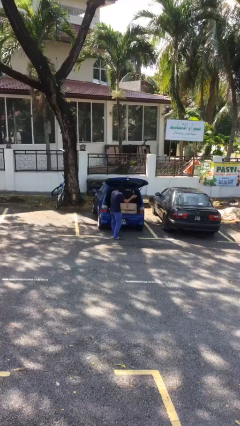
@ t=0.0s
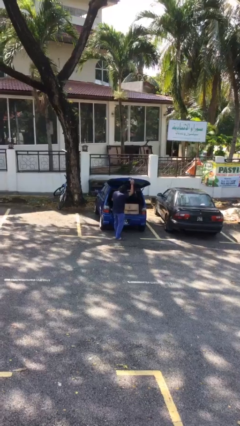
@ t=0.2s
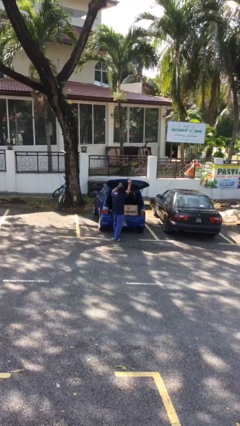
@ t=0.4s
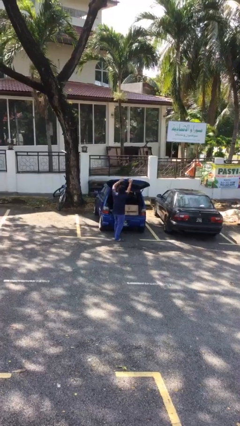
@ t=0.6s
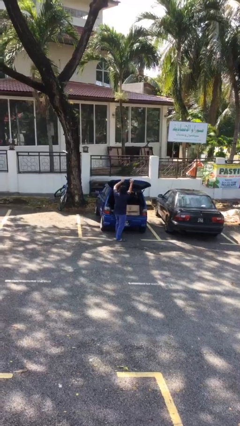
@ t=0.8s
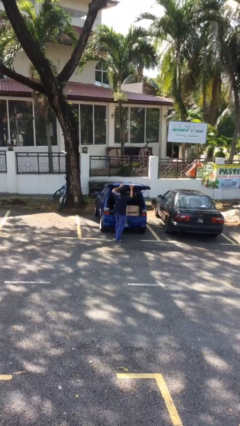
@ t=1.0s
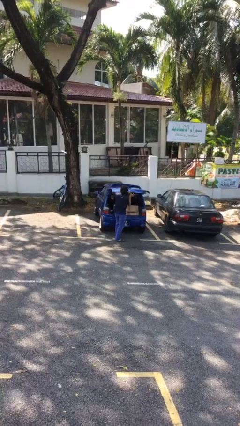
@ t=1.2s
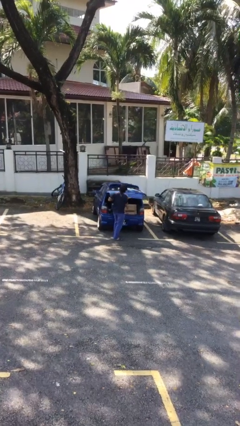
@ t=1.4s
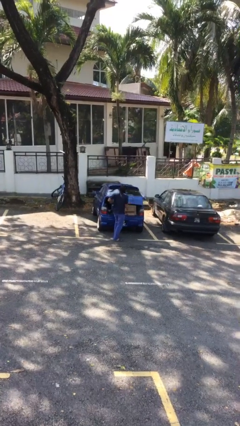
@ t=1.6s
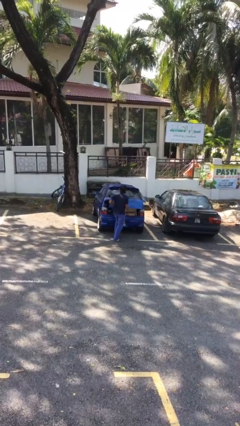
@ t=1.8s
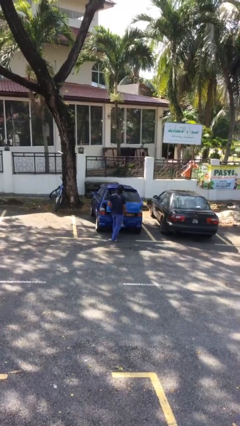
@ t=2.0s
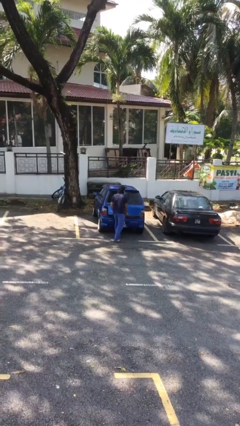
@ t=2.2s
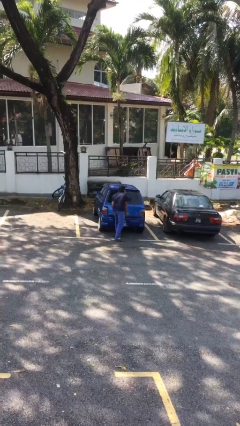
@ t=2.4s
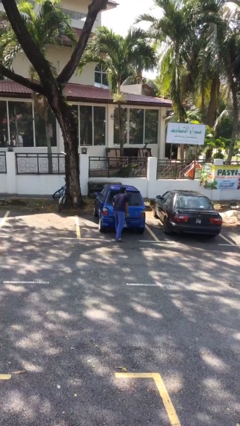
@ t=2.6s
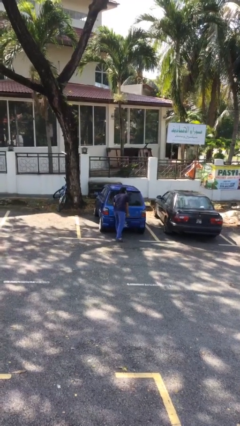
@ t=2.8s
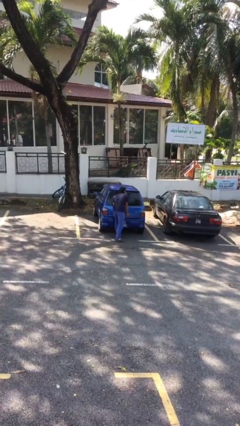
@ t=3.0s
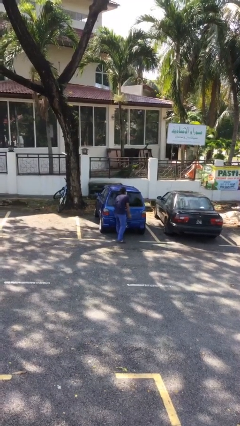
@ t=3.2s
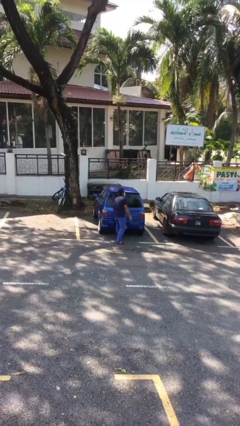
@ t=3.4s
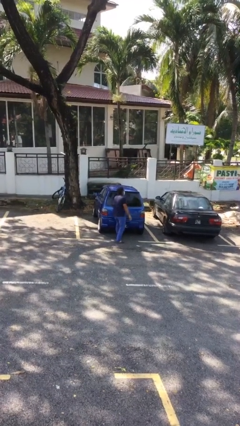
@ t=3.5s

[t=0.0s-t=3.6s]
person closes car trunk

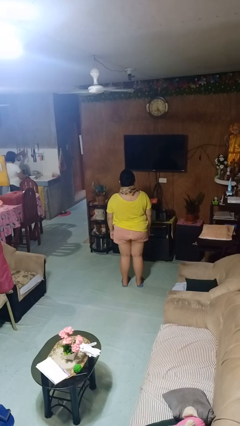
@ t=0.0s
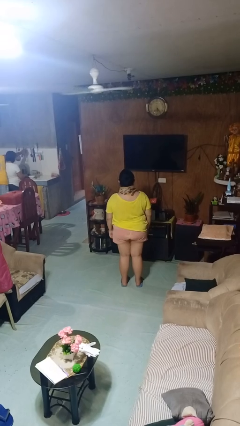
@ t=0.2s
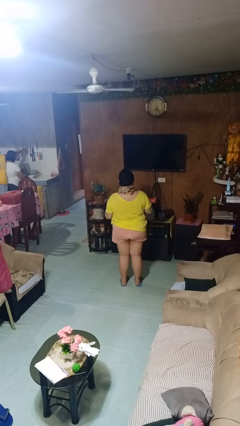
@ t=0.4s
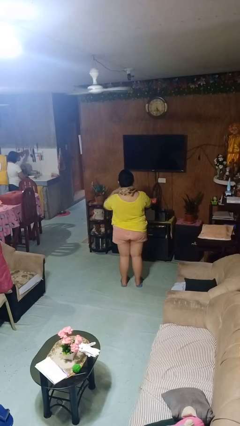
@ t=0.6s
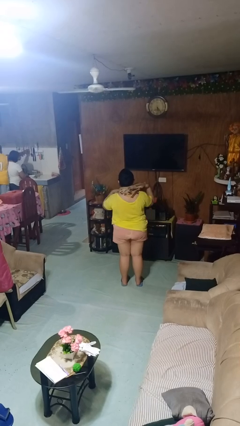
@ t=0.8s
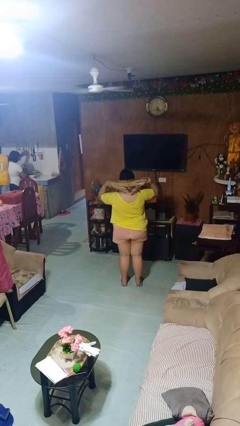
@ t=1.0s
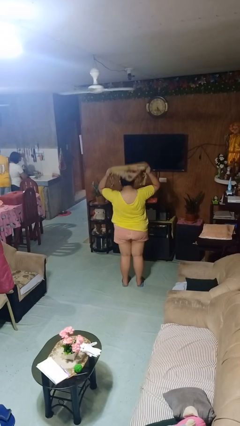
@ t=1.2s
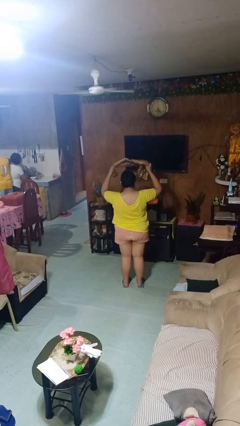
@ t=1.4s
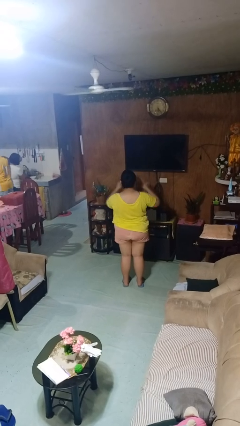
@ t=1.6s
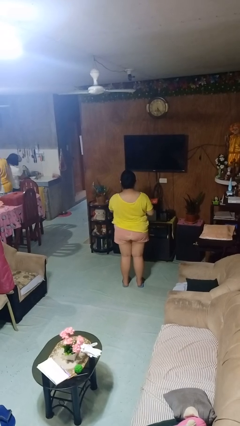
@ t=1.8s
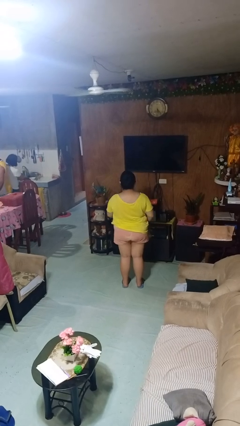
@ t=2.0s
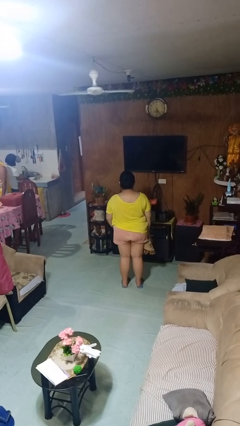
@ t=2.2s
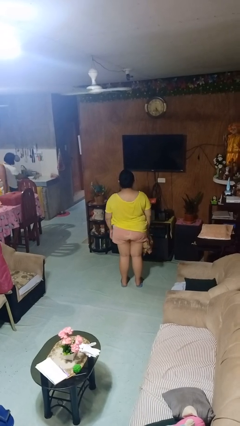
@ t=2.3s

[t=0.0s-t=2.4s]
person takes off scarf

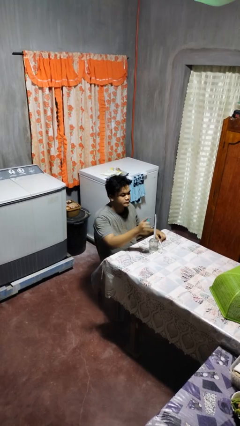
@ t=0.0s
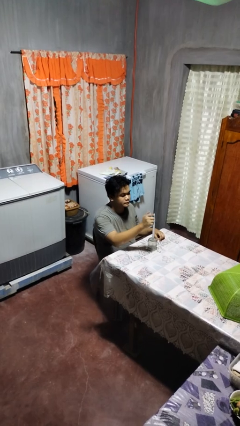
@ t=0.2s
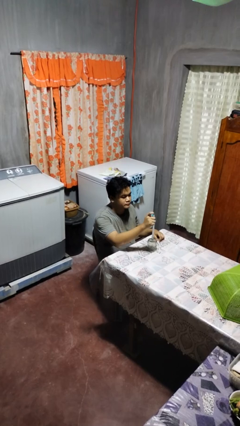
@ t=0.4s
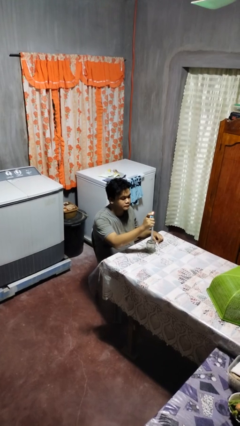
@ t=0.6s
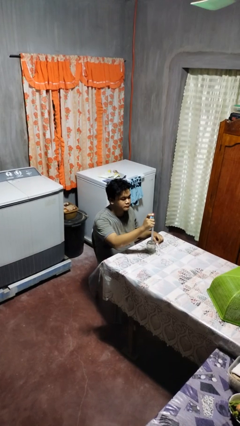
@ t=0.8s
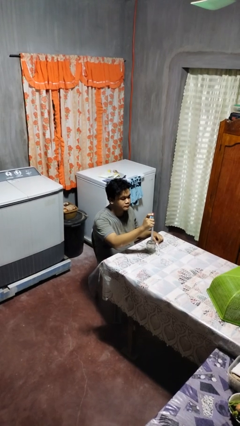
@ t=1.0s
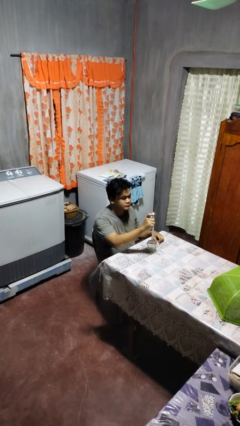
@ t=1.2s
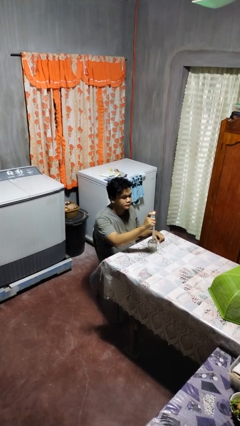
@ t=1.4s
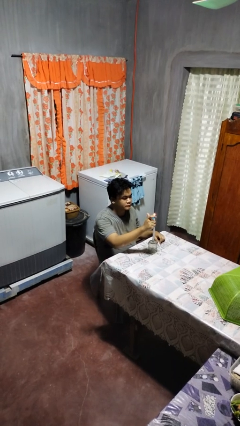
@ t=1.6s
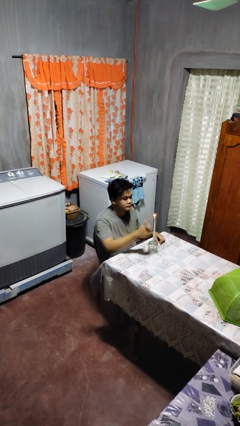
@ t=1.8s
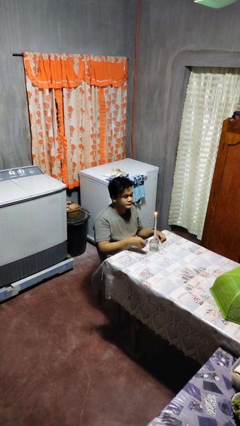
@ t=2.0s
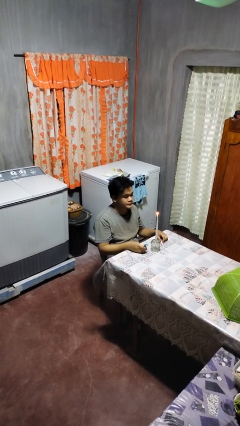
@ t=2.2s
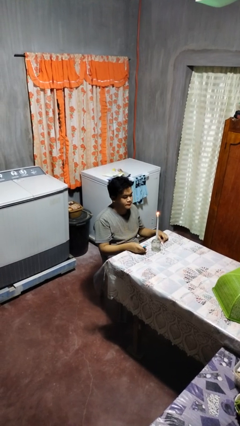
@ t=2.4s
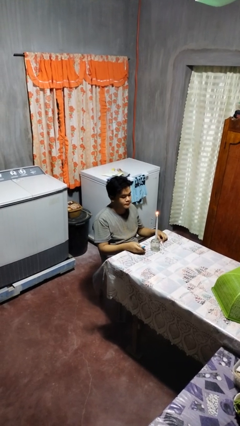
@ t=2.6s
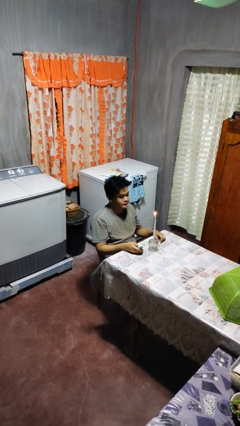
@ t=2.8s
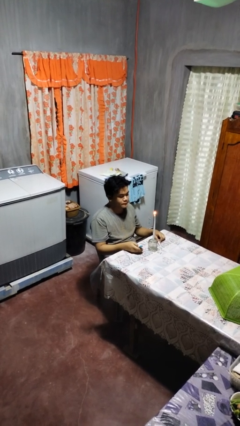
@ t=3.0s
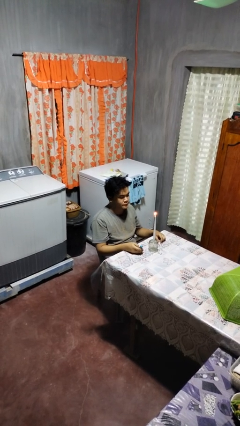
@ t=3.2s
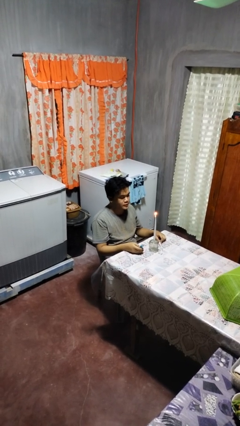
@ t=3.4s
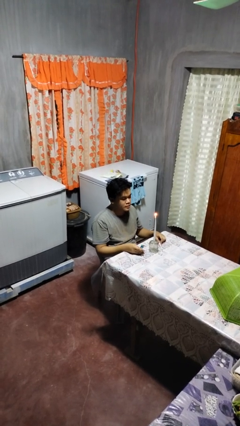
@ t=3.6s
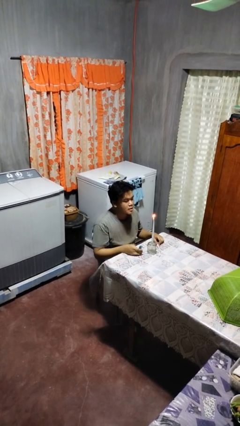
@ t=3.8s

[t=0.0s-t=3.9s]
person lights candle

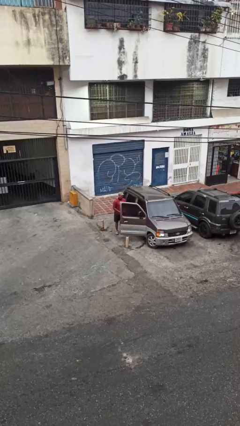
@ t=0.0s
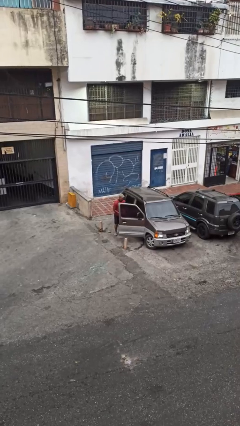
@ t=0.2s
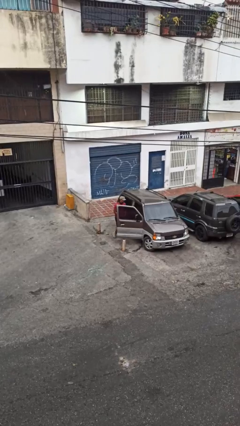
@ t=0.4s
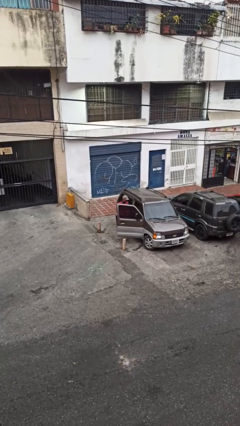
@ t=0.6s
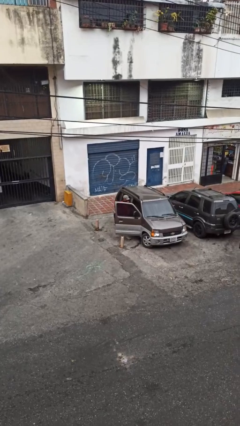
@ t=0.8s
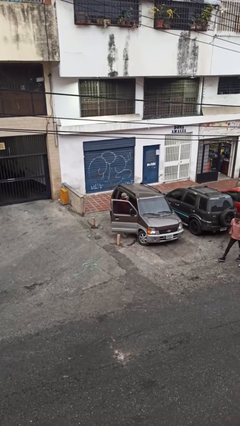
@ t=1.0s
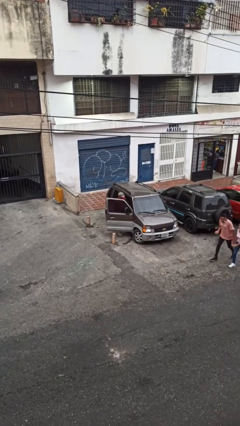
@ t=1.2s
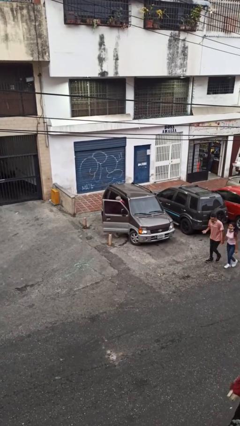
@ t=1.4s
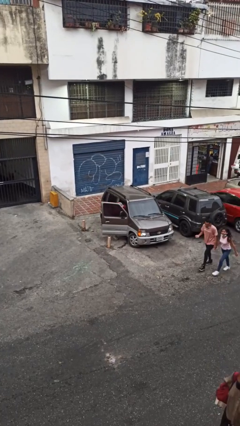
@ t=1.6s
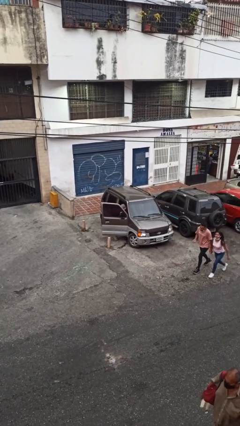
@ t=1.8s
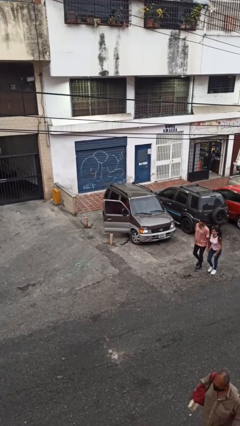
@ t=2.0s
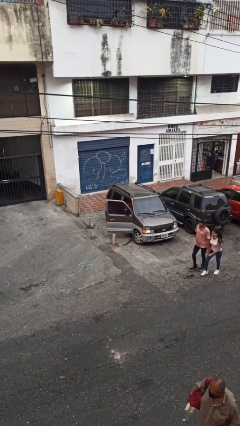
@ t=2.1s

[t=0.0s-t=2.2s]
person enters car

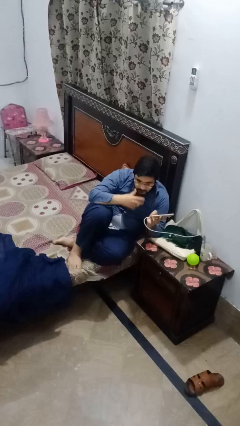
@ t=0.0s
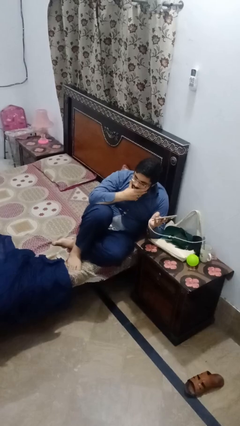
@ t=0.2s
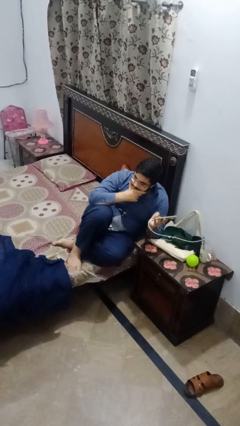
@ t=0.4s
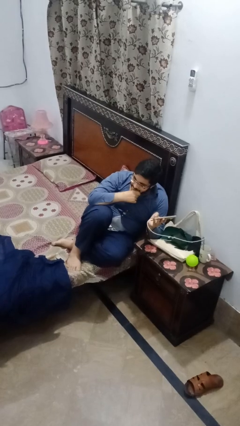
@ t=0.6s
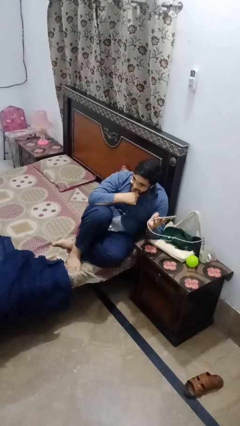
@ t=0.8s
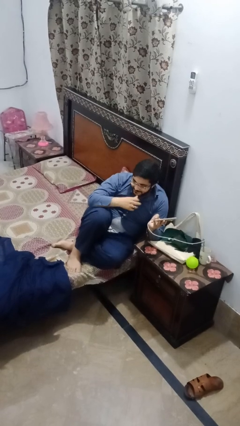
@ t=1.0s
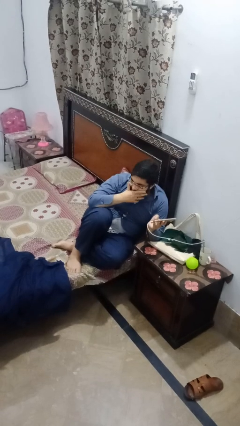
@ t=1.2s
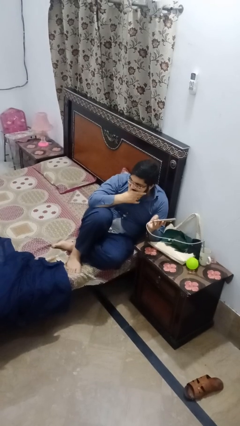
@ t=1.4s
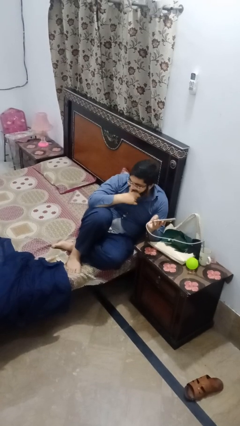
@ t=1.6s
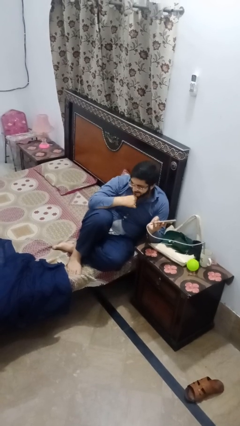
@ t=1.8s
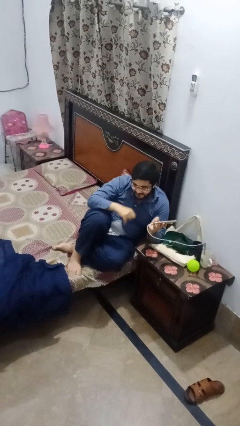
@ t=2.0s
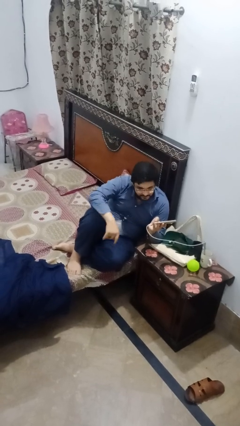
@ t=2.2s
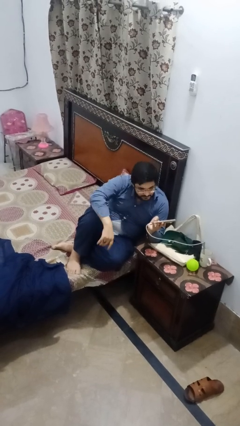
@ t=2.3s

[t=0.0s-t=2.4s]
person strokes chin

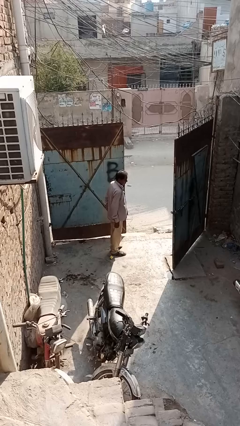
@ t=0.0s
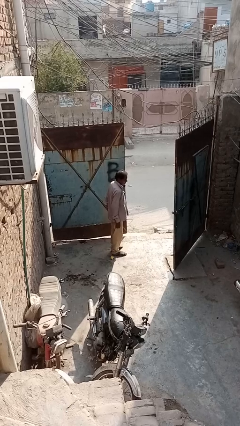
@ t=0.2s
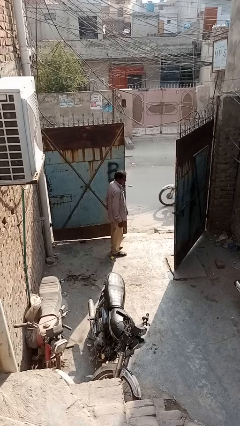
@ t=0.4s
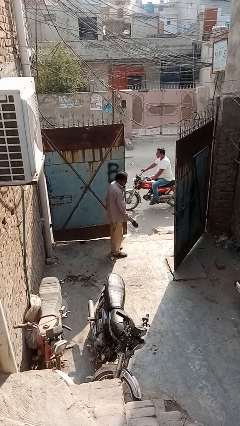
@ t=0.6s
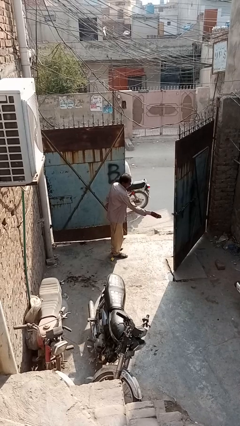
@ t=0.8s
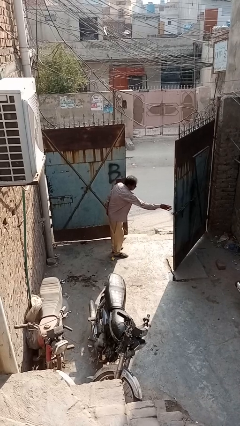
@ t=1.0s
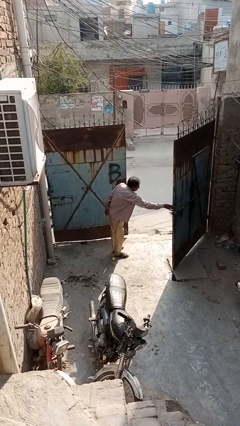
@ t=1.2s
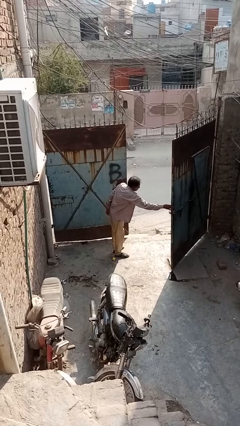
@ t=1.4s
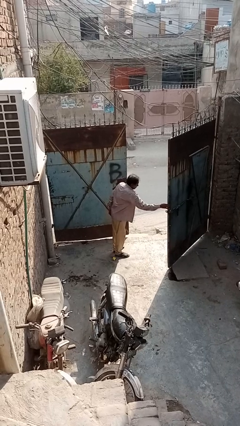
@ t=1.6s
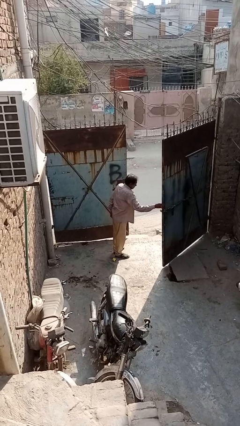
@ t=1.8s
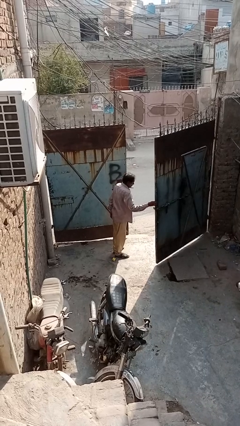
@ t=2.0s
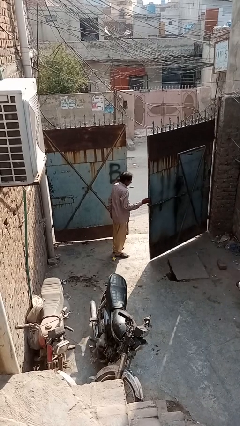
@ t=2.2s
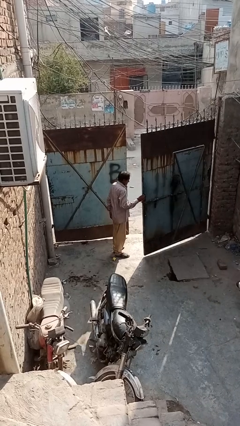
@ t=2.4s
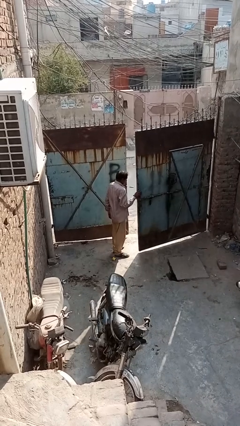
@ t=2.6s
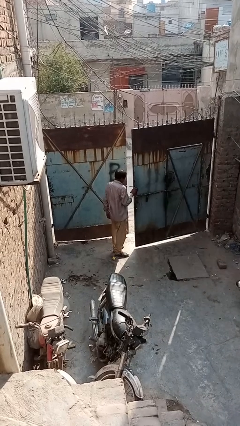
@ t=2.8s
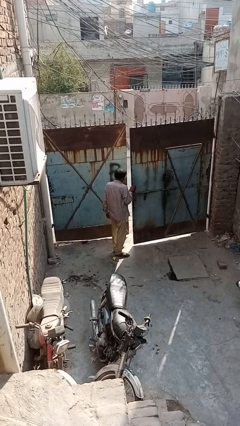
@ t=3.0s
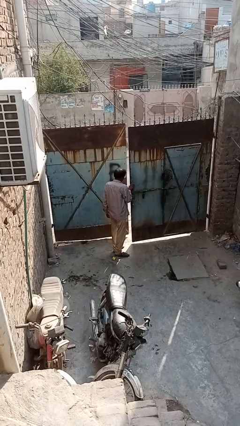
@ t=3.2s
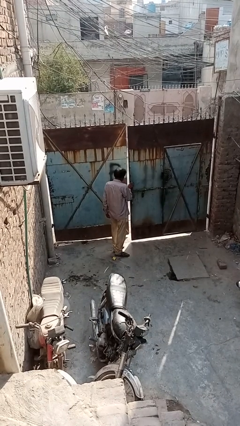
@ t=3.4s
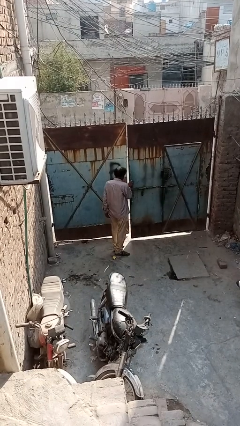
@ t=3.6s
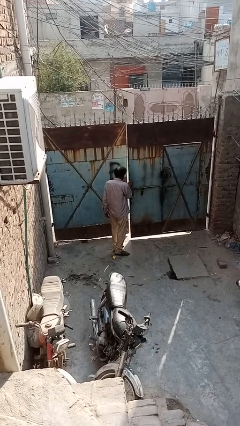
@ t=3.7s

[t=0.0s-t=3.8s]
person closes gate
